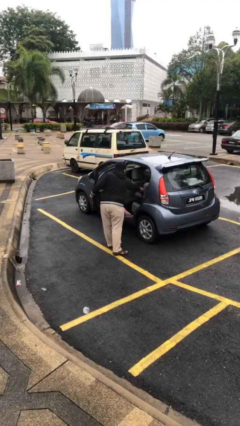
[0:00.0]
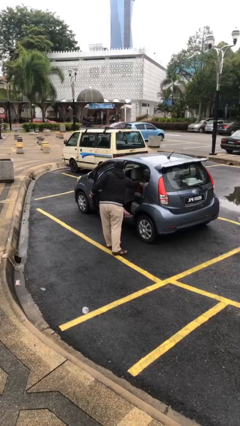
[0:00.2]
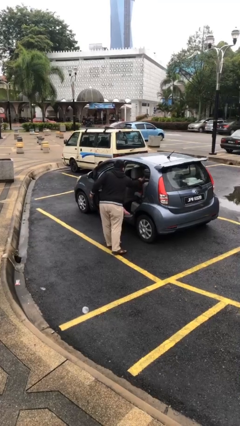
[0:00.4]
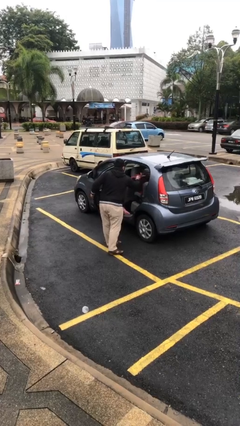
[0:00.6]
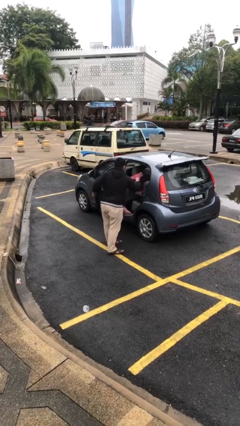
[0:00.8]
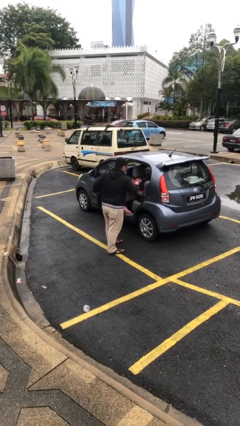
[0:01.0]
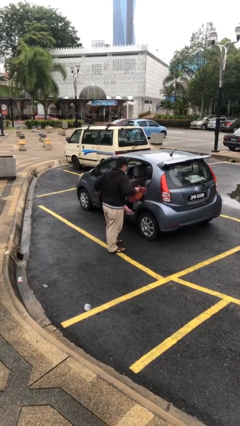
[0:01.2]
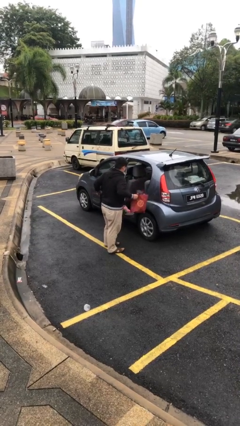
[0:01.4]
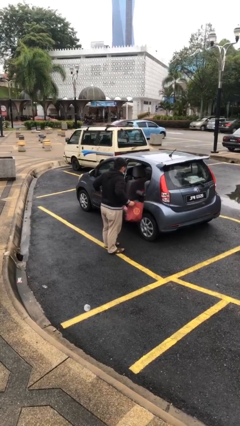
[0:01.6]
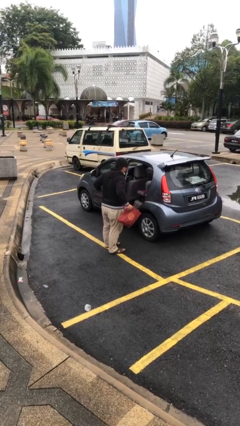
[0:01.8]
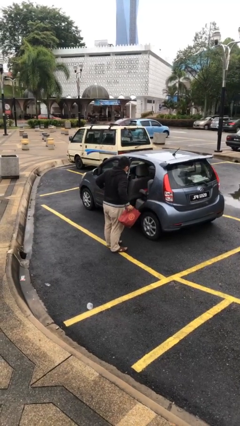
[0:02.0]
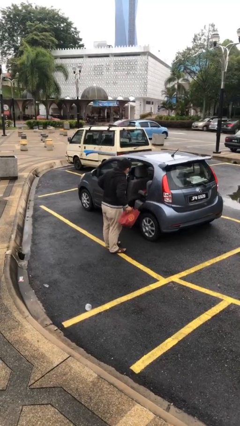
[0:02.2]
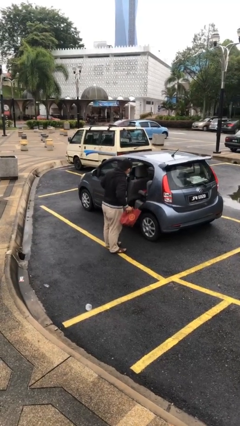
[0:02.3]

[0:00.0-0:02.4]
person unloads car

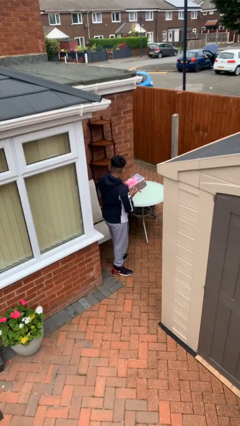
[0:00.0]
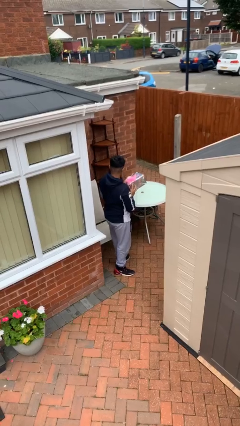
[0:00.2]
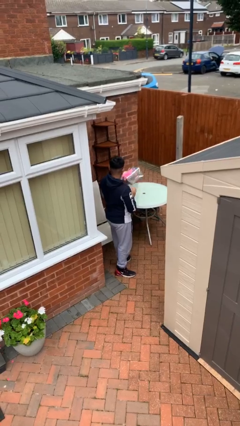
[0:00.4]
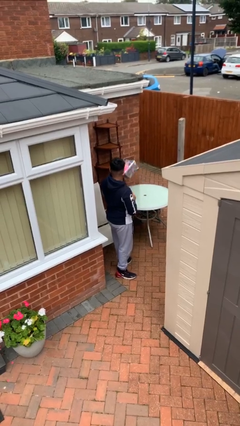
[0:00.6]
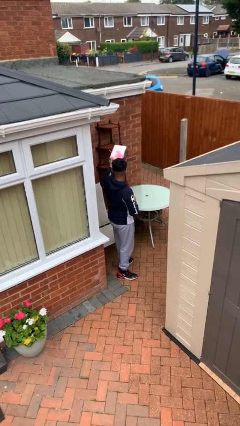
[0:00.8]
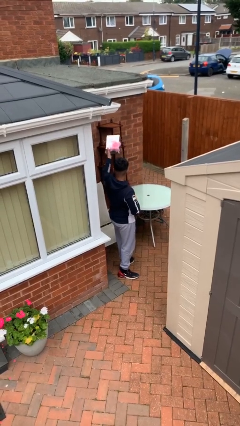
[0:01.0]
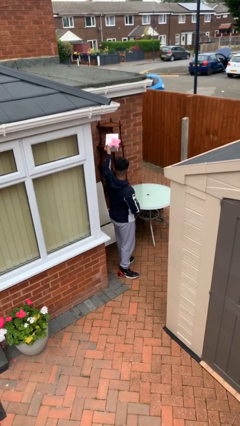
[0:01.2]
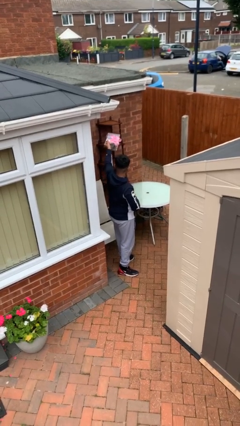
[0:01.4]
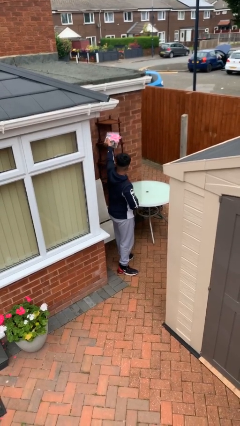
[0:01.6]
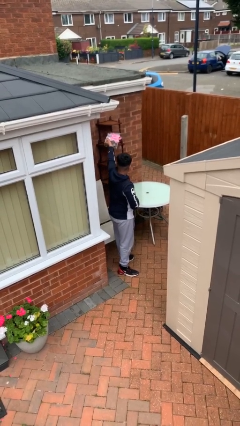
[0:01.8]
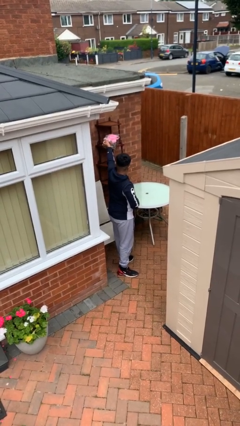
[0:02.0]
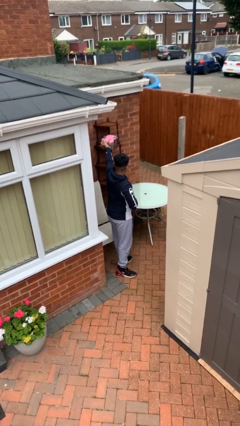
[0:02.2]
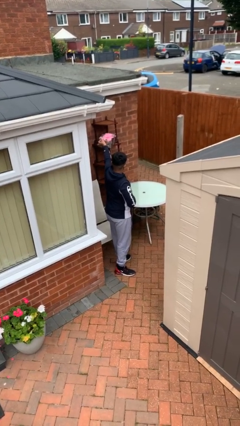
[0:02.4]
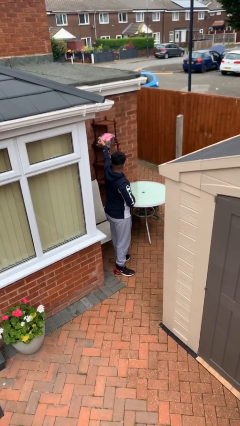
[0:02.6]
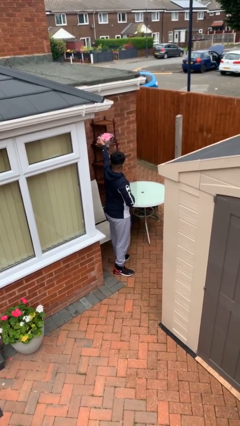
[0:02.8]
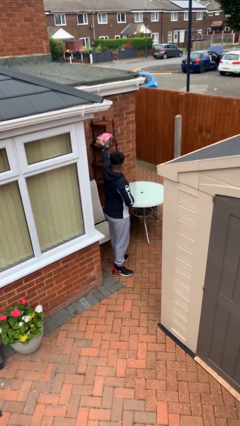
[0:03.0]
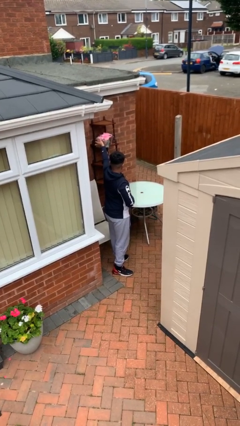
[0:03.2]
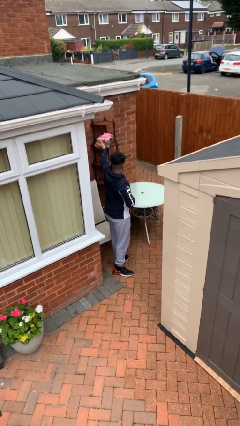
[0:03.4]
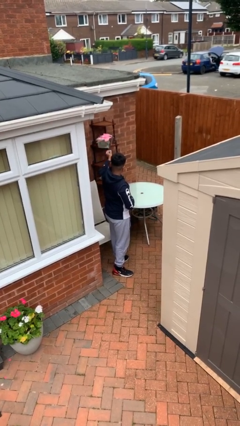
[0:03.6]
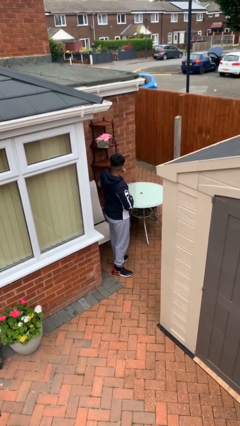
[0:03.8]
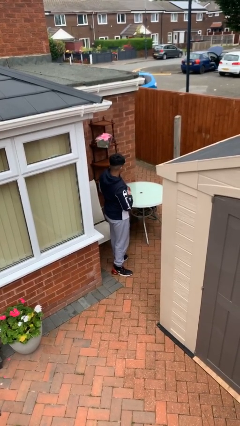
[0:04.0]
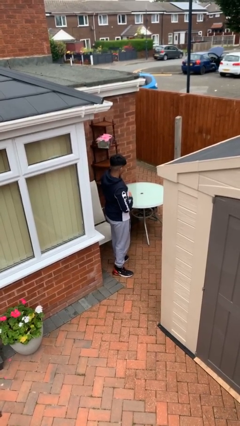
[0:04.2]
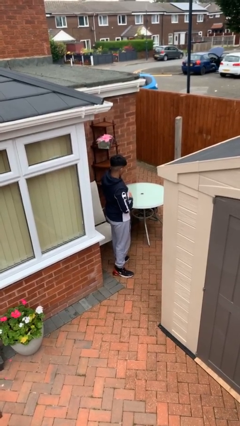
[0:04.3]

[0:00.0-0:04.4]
person puts down object on shelf

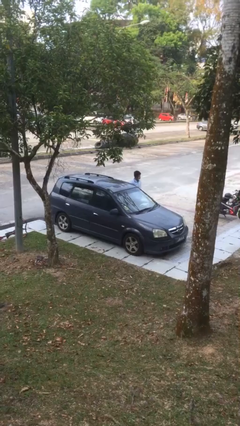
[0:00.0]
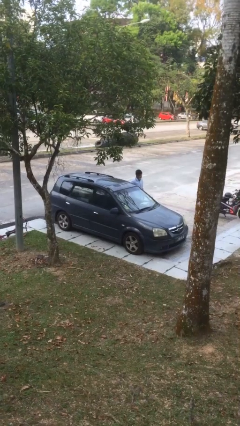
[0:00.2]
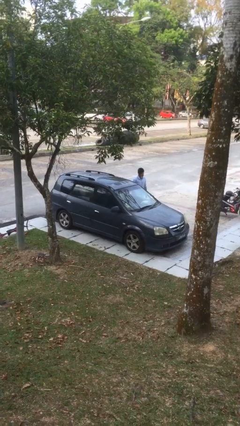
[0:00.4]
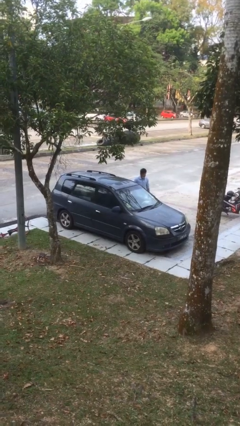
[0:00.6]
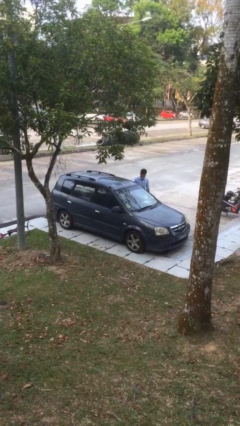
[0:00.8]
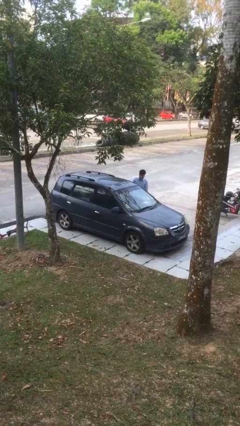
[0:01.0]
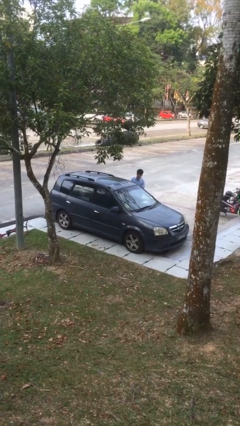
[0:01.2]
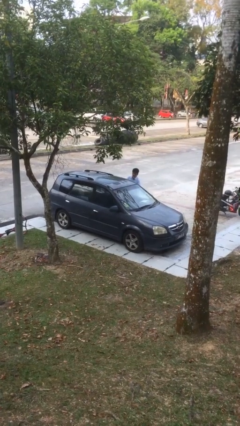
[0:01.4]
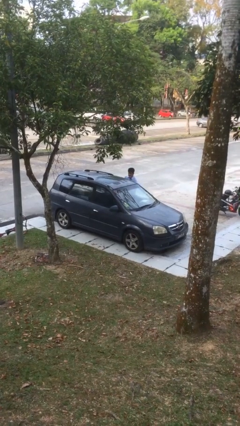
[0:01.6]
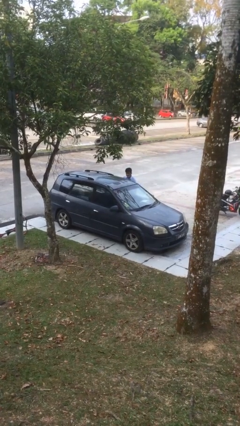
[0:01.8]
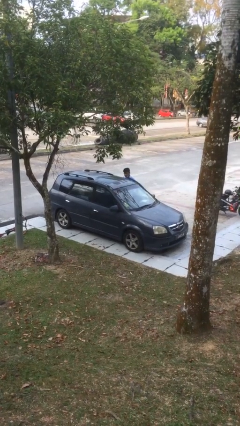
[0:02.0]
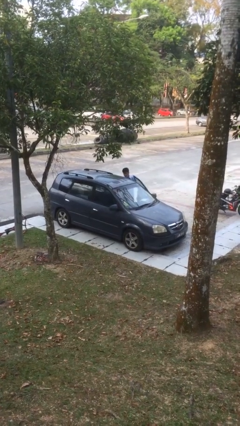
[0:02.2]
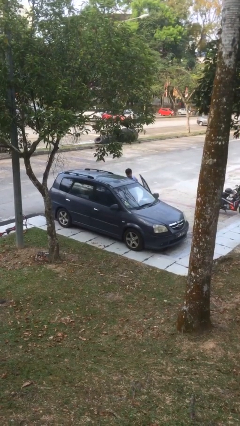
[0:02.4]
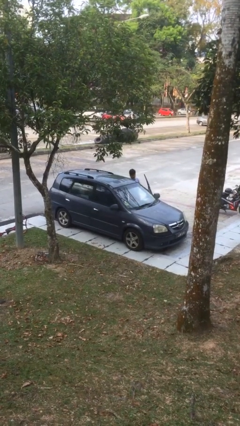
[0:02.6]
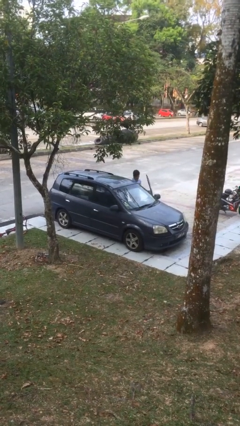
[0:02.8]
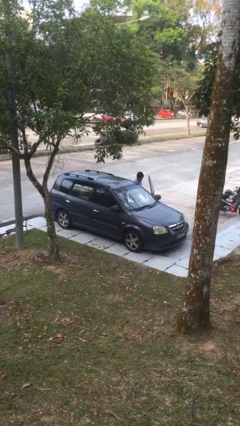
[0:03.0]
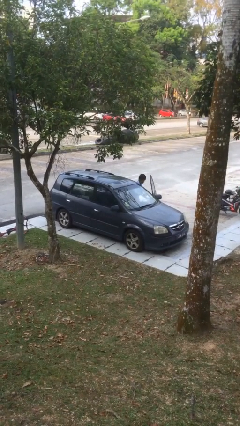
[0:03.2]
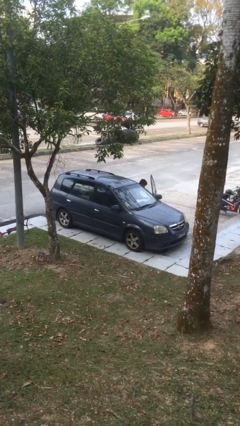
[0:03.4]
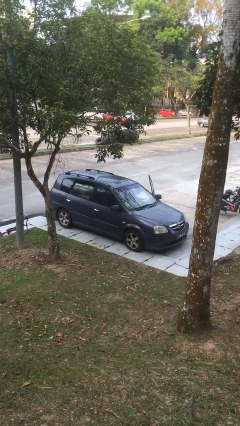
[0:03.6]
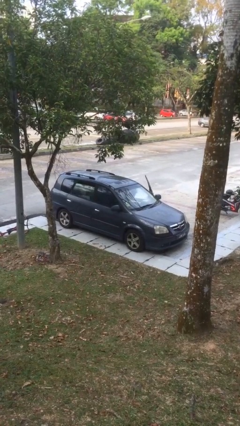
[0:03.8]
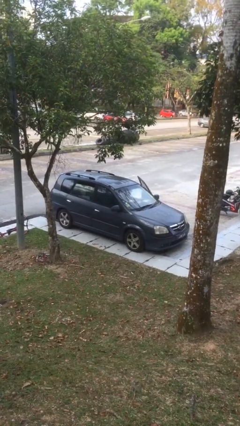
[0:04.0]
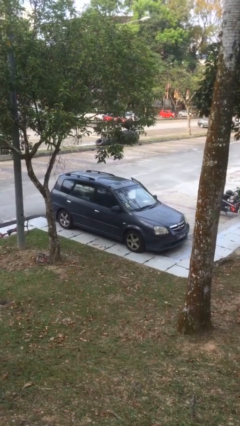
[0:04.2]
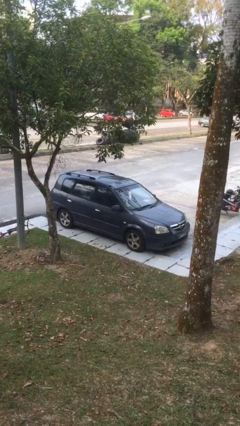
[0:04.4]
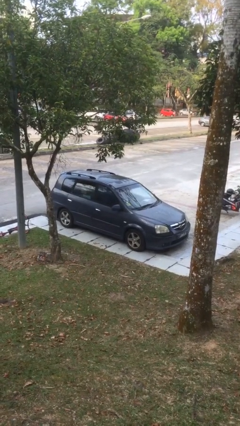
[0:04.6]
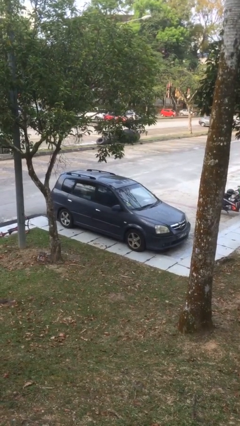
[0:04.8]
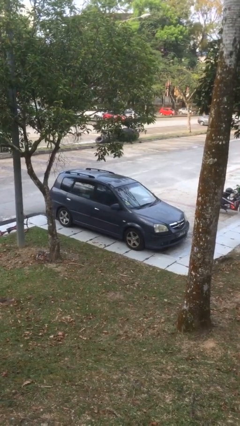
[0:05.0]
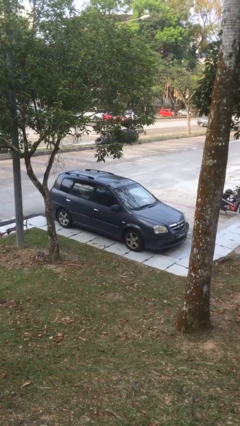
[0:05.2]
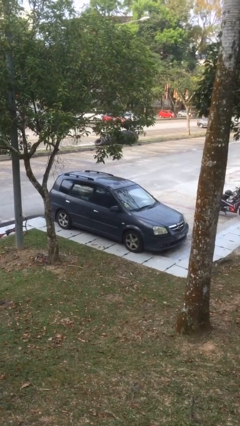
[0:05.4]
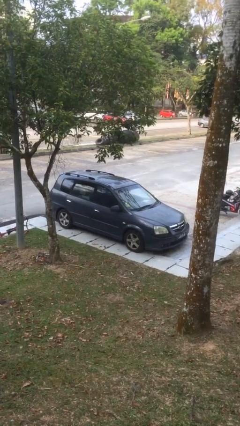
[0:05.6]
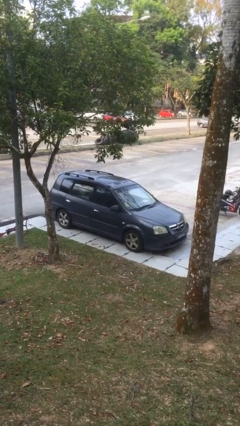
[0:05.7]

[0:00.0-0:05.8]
car picks up person

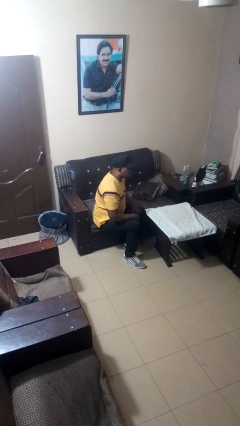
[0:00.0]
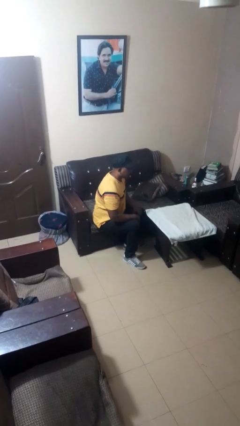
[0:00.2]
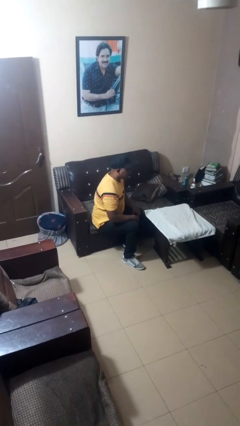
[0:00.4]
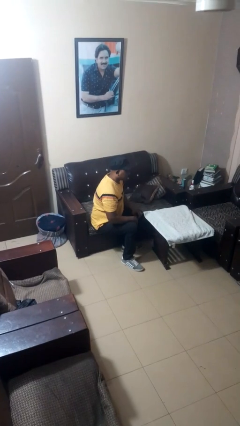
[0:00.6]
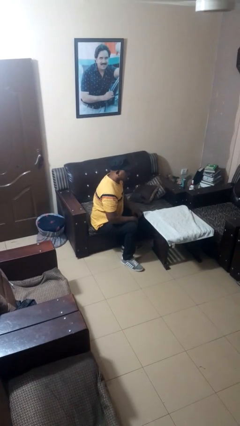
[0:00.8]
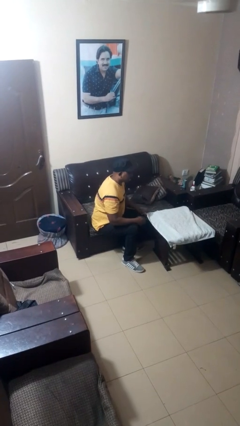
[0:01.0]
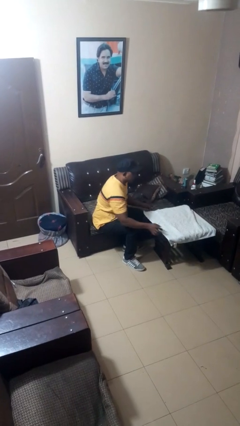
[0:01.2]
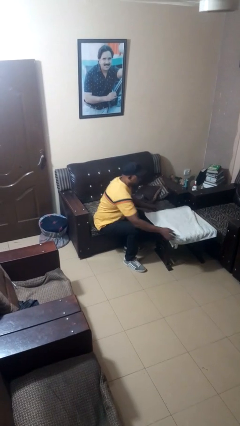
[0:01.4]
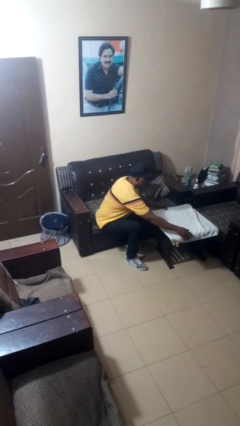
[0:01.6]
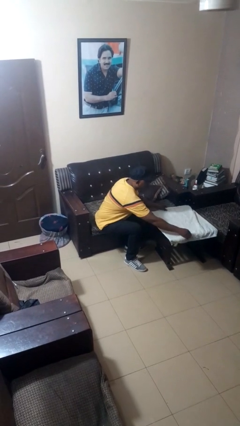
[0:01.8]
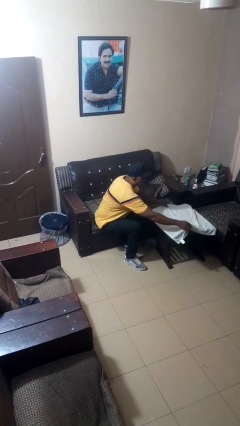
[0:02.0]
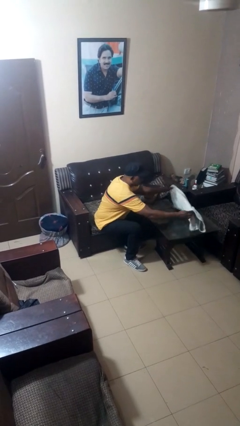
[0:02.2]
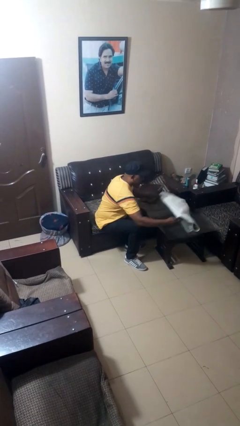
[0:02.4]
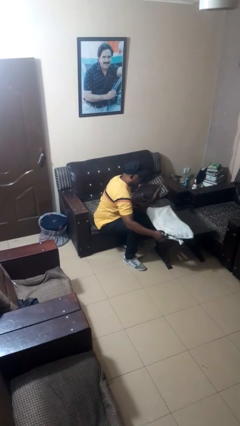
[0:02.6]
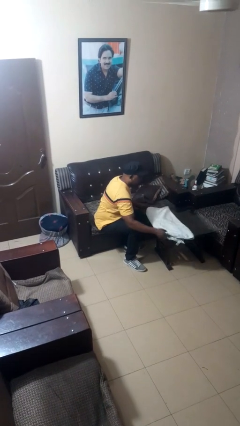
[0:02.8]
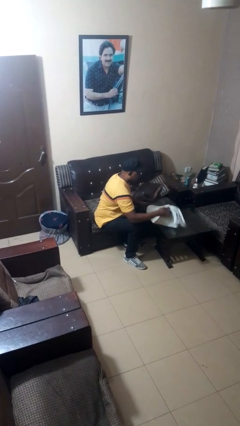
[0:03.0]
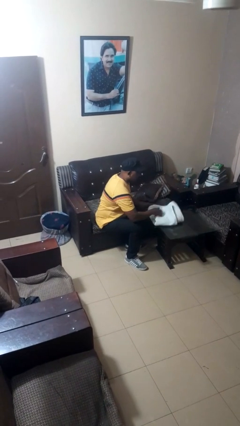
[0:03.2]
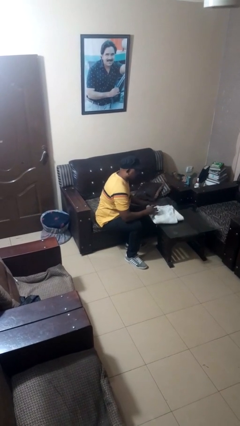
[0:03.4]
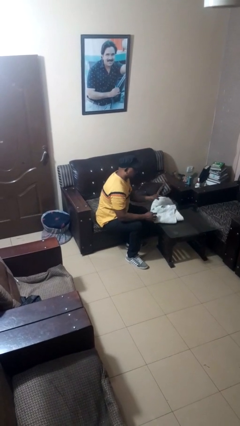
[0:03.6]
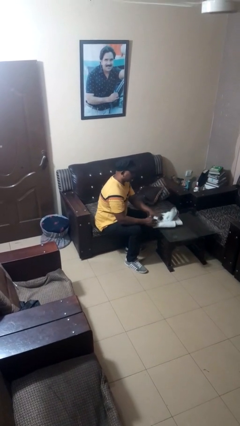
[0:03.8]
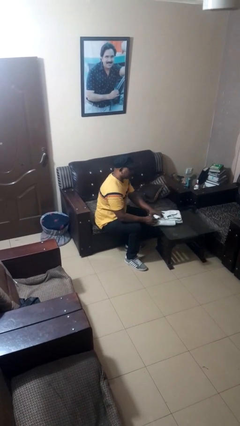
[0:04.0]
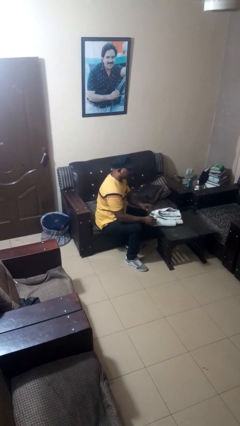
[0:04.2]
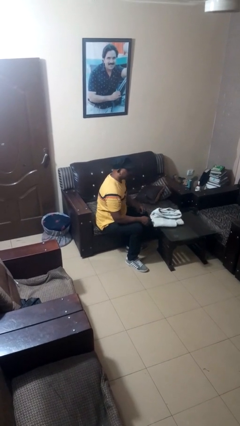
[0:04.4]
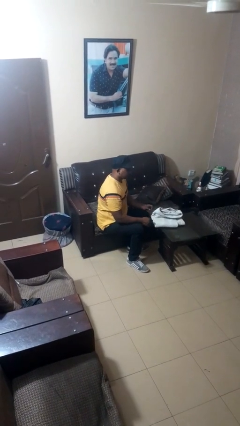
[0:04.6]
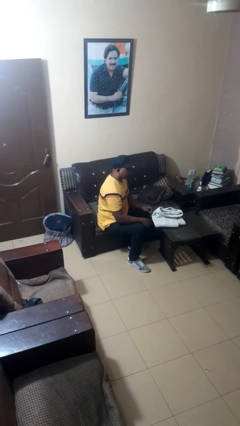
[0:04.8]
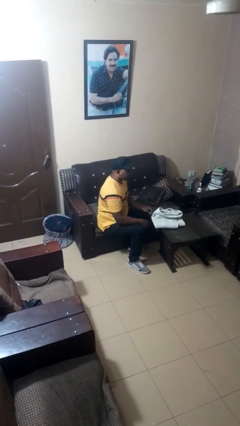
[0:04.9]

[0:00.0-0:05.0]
person folds tablecloth
